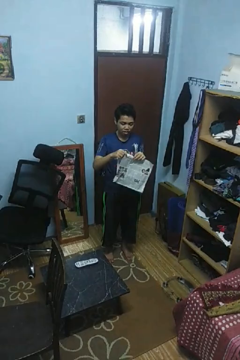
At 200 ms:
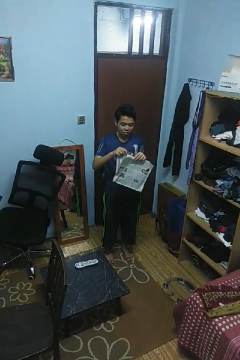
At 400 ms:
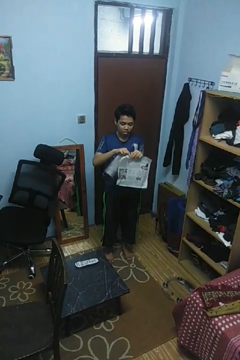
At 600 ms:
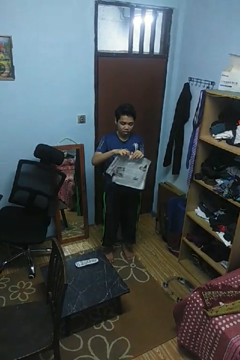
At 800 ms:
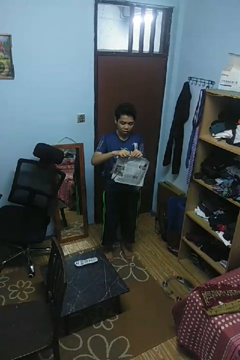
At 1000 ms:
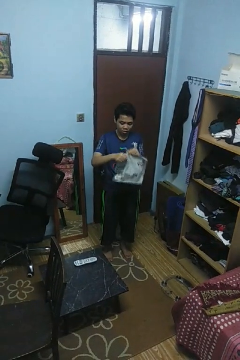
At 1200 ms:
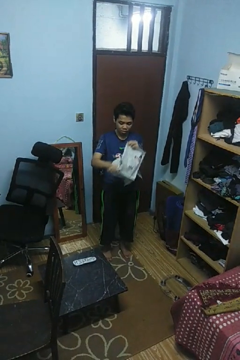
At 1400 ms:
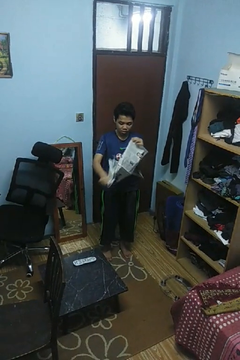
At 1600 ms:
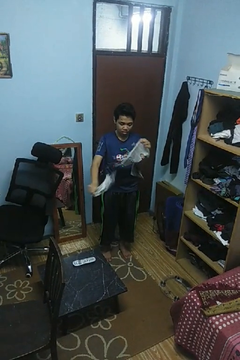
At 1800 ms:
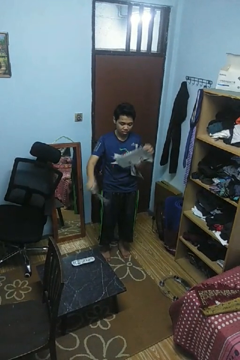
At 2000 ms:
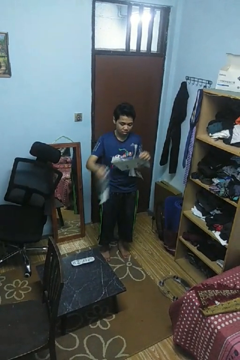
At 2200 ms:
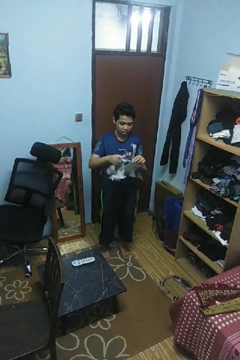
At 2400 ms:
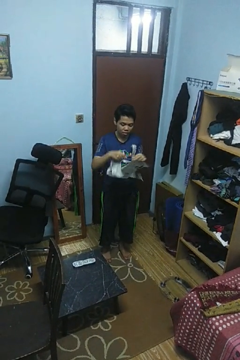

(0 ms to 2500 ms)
person tears paper

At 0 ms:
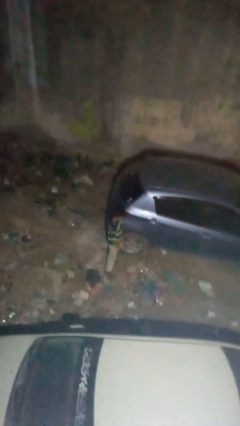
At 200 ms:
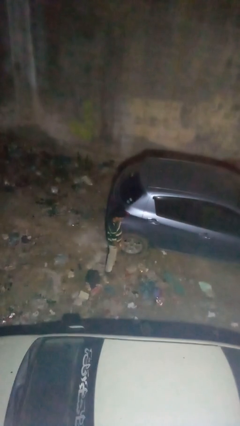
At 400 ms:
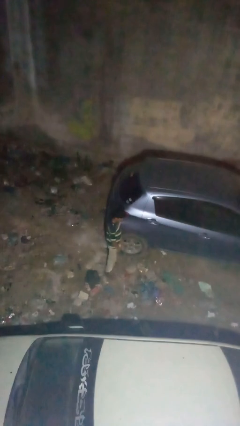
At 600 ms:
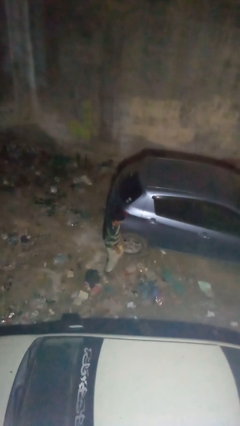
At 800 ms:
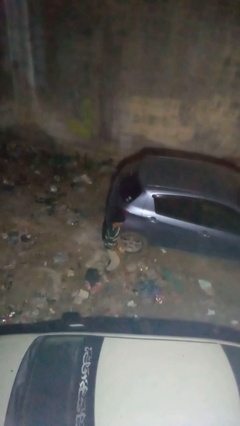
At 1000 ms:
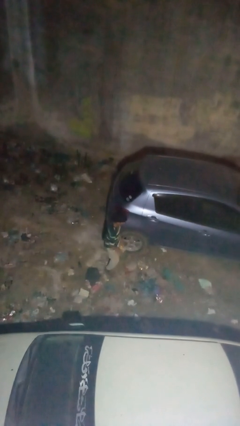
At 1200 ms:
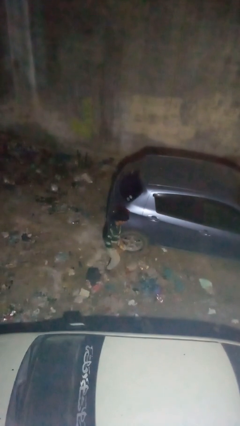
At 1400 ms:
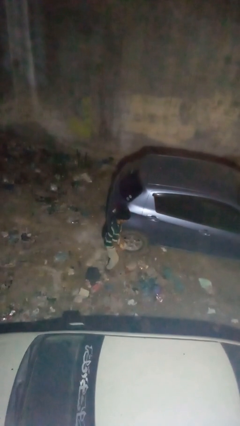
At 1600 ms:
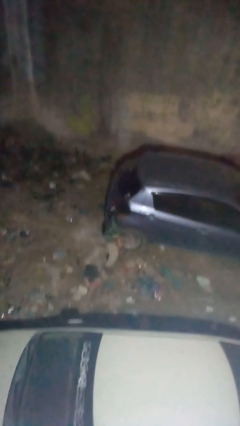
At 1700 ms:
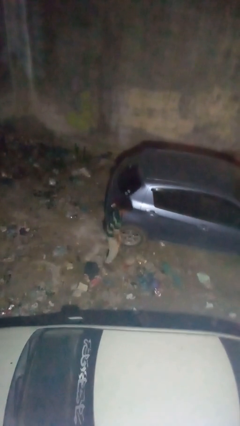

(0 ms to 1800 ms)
person kicks car tires

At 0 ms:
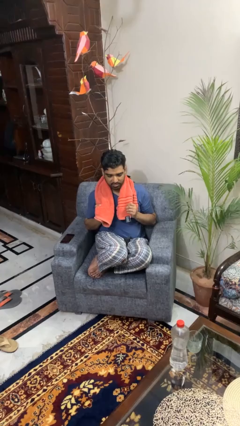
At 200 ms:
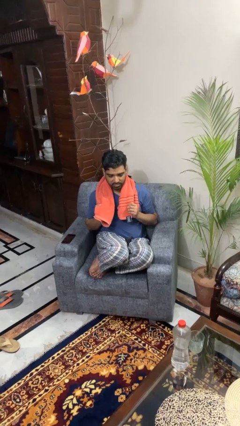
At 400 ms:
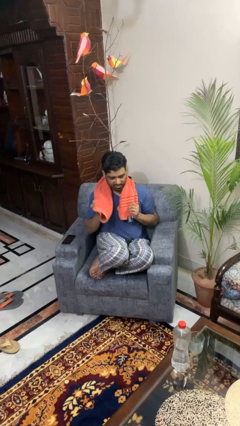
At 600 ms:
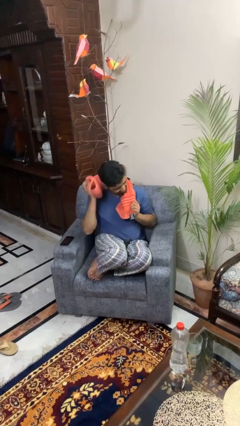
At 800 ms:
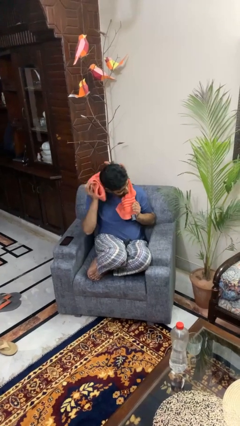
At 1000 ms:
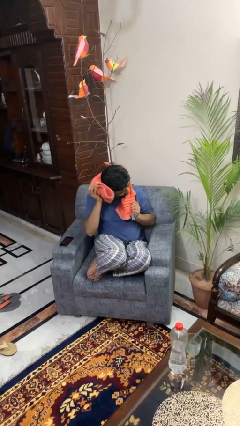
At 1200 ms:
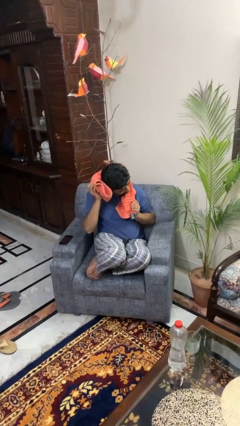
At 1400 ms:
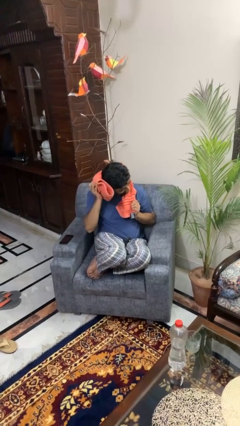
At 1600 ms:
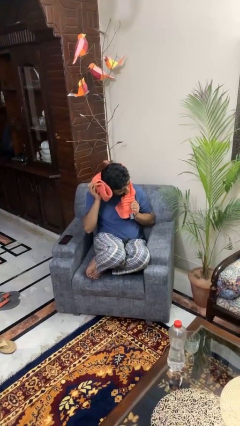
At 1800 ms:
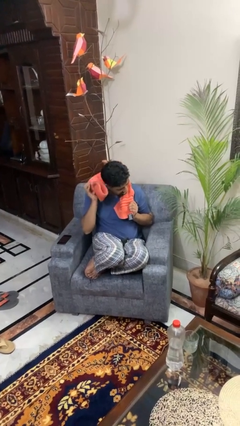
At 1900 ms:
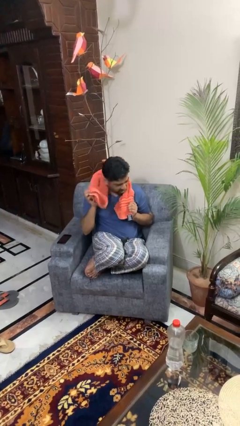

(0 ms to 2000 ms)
person dries hair with towel

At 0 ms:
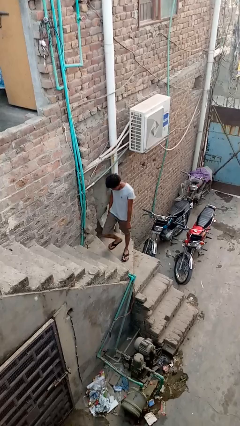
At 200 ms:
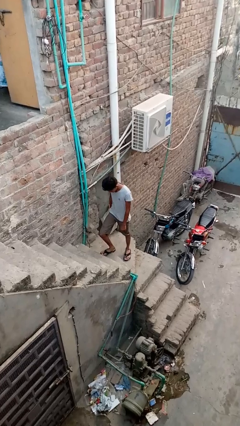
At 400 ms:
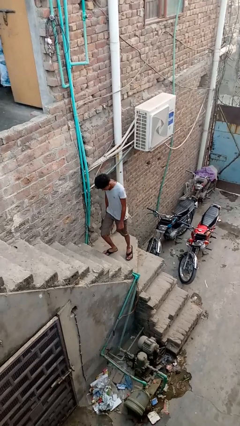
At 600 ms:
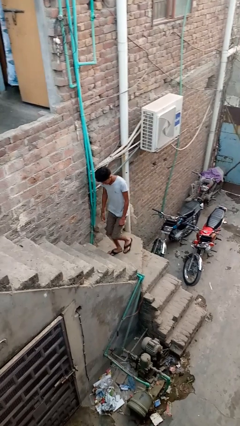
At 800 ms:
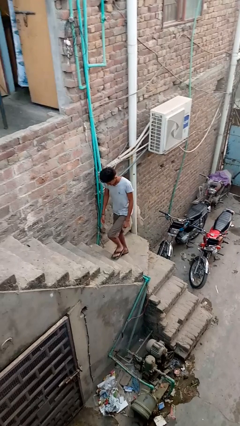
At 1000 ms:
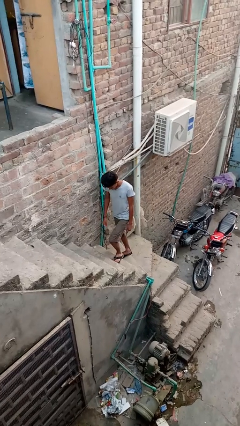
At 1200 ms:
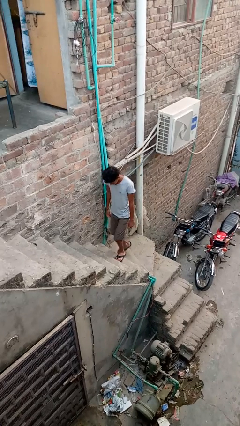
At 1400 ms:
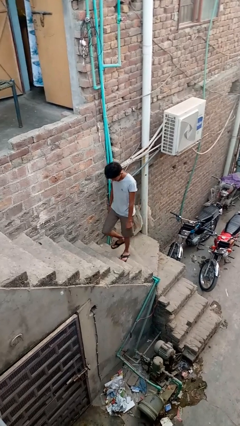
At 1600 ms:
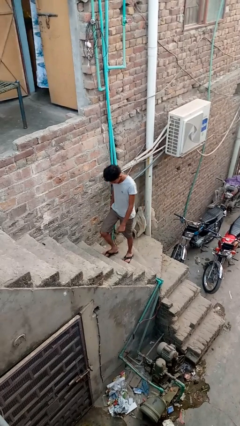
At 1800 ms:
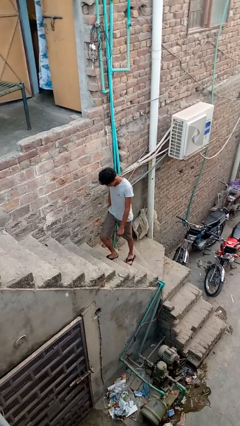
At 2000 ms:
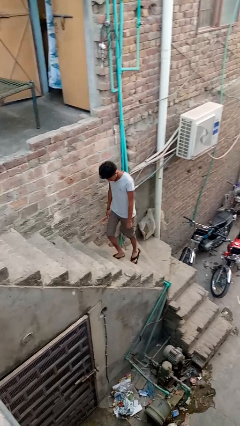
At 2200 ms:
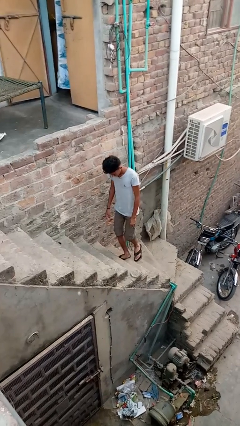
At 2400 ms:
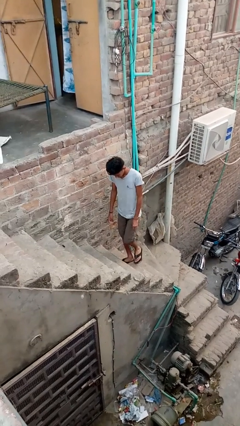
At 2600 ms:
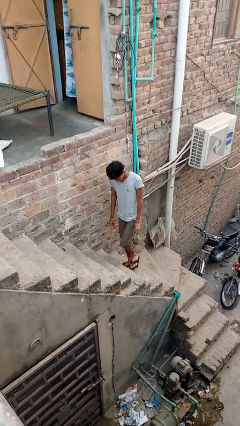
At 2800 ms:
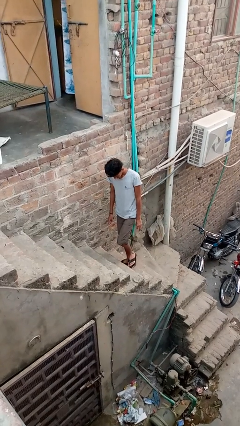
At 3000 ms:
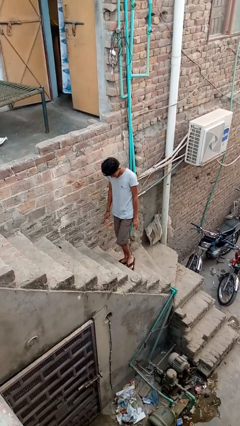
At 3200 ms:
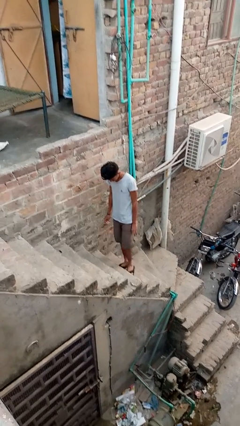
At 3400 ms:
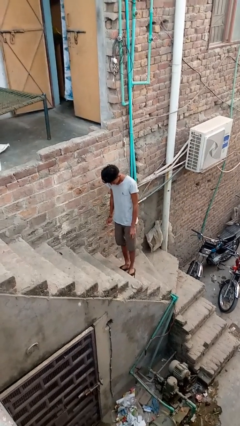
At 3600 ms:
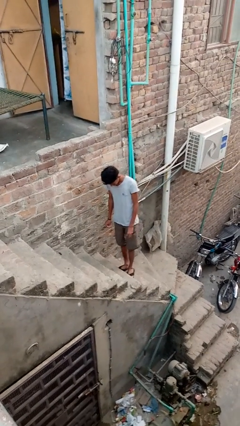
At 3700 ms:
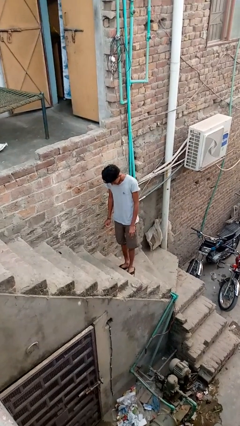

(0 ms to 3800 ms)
person climbs up stairs

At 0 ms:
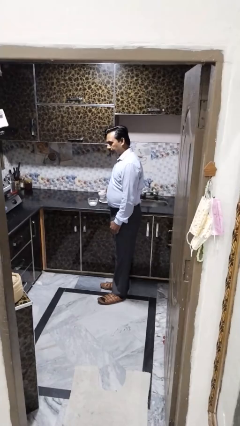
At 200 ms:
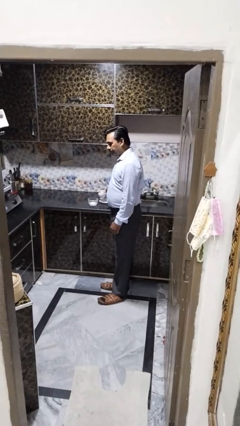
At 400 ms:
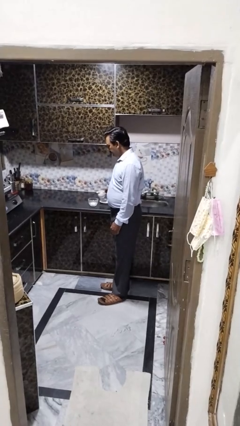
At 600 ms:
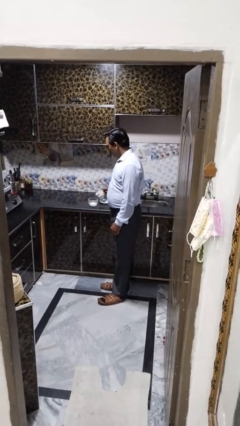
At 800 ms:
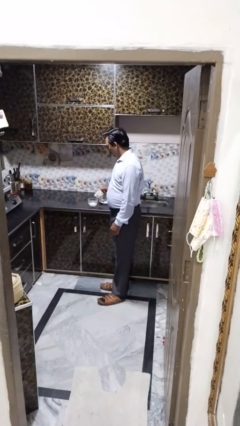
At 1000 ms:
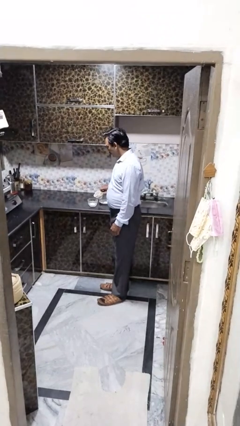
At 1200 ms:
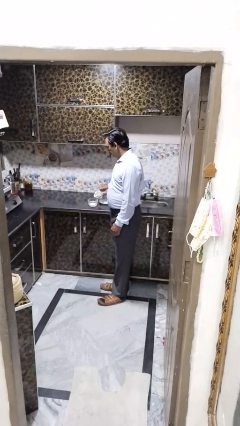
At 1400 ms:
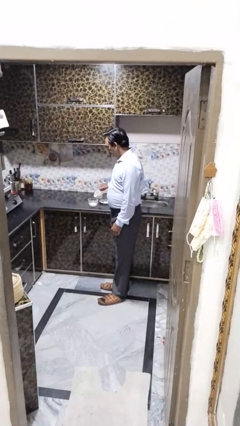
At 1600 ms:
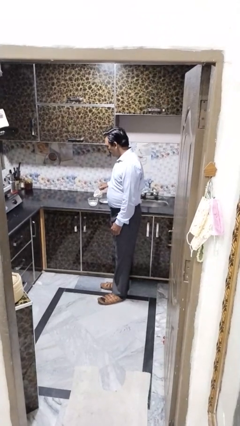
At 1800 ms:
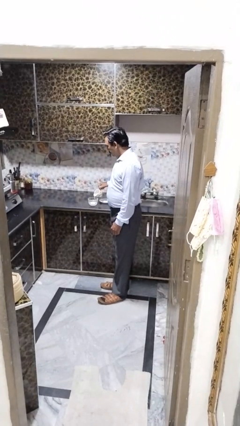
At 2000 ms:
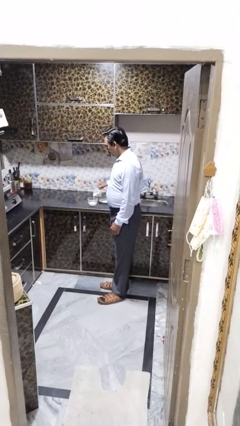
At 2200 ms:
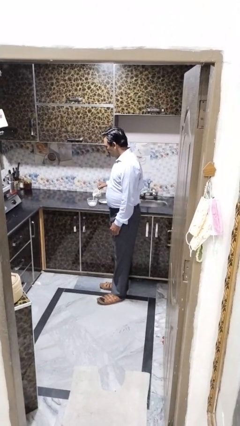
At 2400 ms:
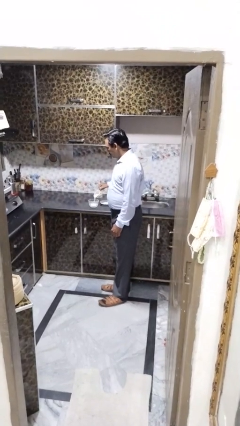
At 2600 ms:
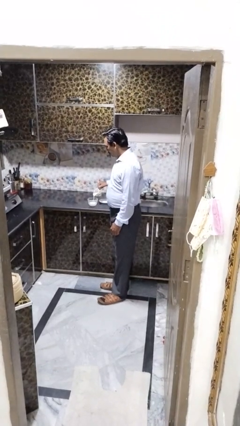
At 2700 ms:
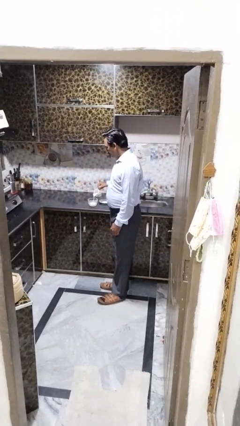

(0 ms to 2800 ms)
person pours into bowl

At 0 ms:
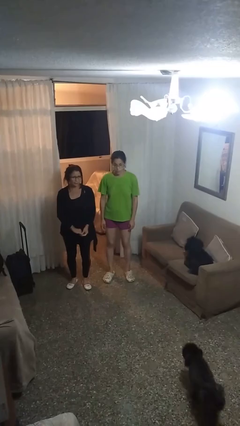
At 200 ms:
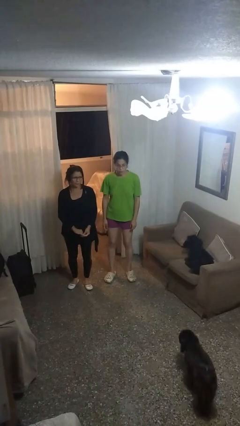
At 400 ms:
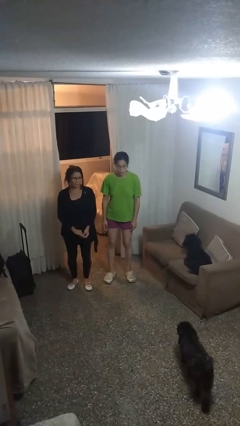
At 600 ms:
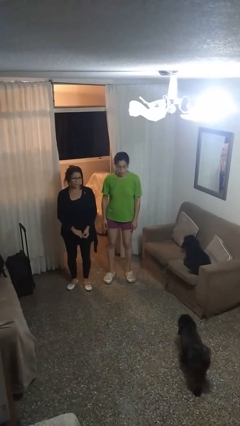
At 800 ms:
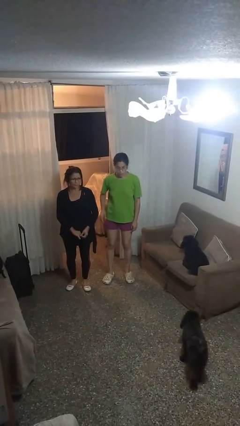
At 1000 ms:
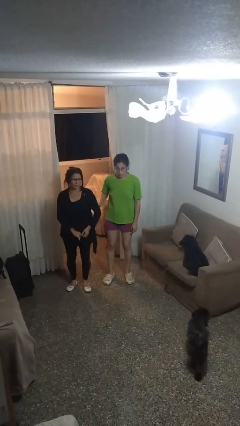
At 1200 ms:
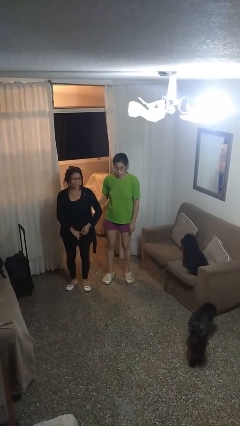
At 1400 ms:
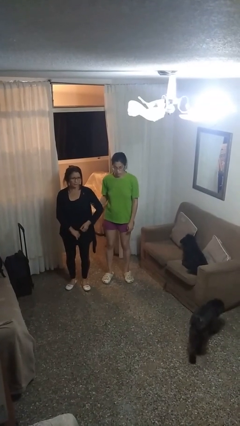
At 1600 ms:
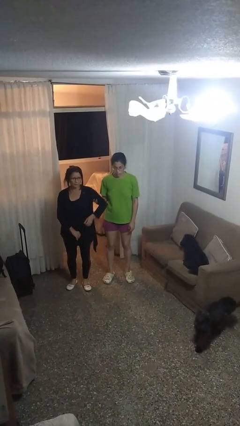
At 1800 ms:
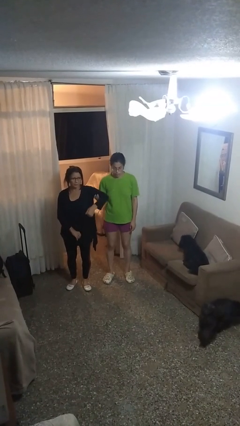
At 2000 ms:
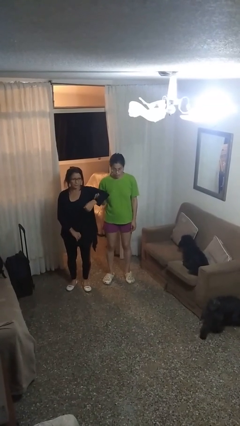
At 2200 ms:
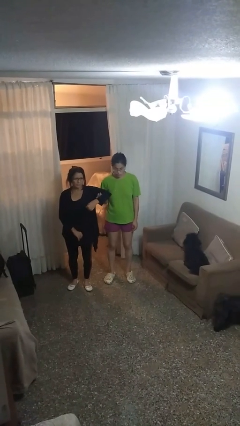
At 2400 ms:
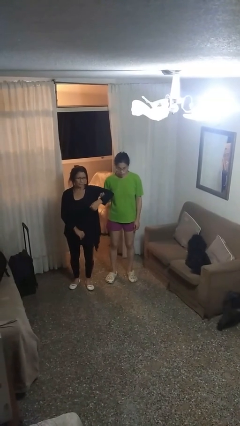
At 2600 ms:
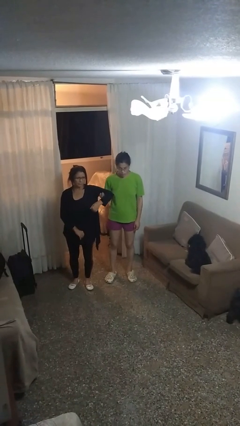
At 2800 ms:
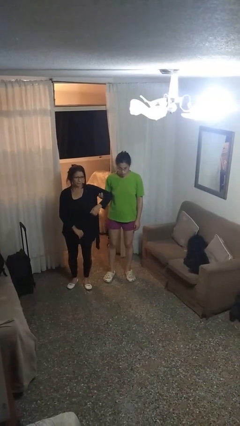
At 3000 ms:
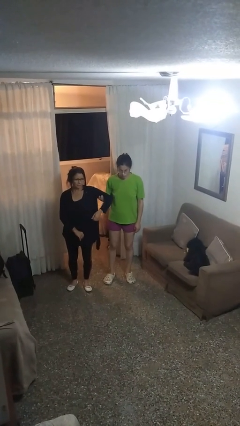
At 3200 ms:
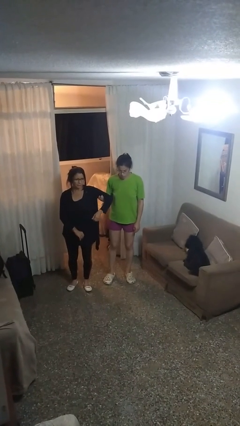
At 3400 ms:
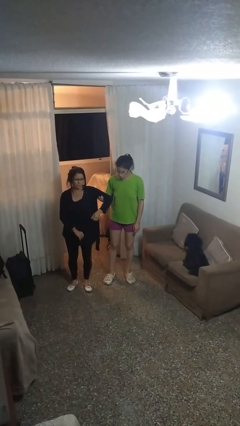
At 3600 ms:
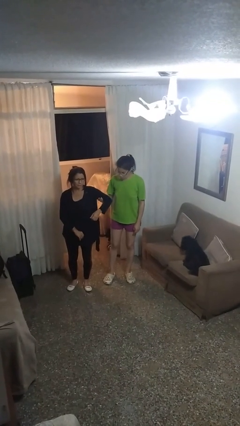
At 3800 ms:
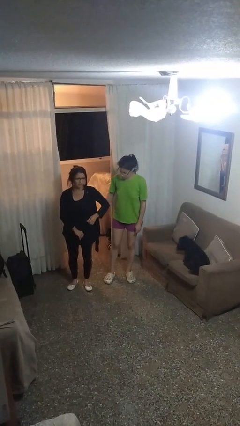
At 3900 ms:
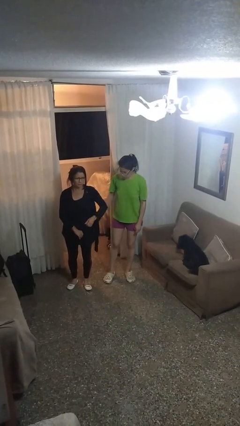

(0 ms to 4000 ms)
person grabs person by bicep

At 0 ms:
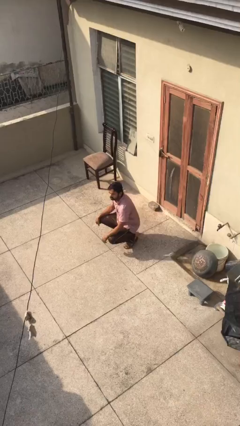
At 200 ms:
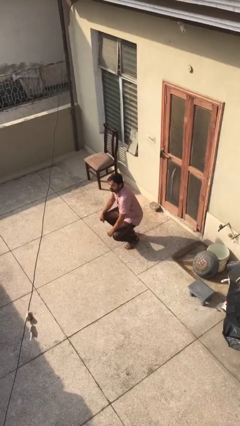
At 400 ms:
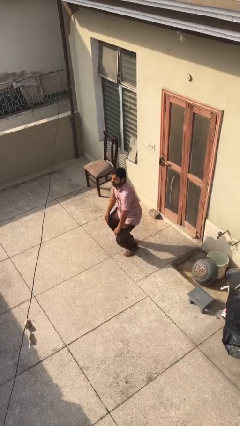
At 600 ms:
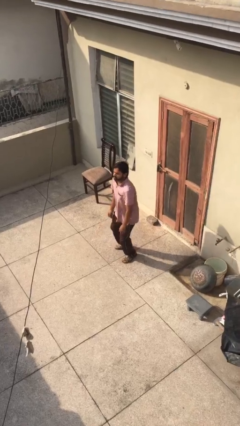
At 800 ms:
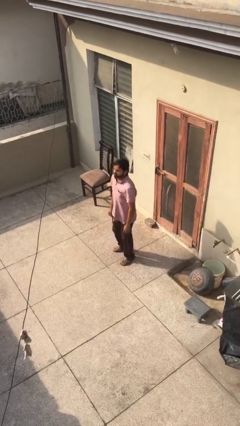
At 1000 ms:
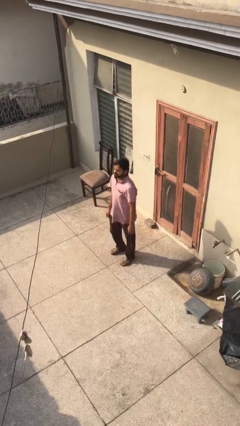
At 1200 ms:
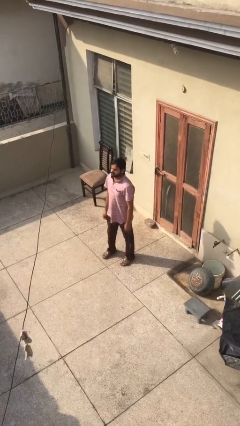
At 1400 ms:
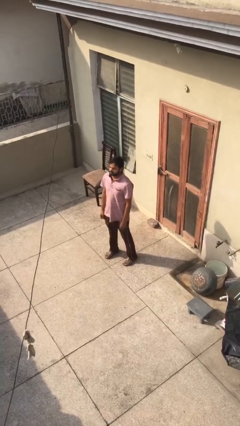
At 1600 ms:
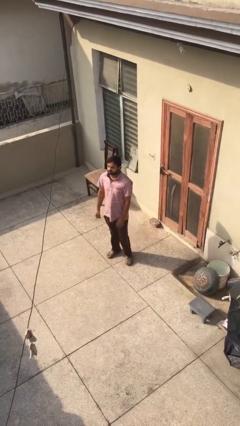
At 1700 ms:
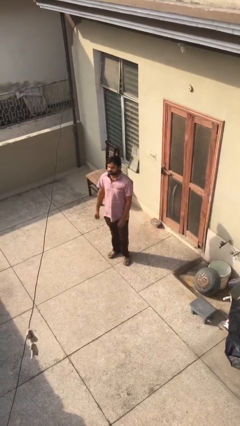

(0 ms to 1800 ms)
person stands up